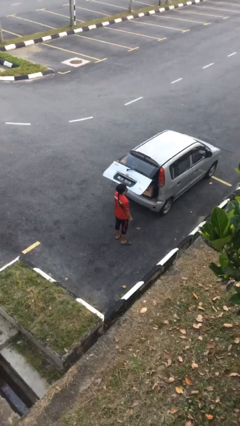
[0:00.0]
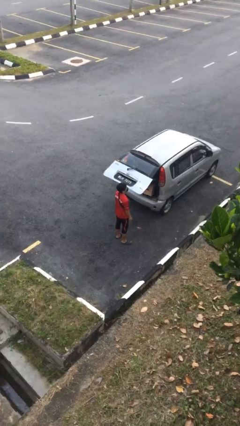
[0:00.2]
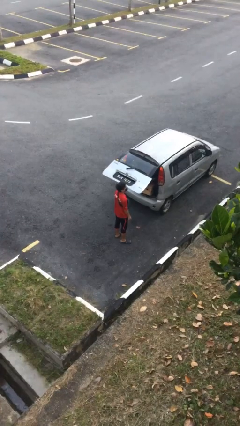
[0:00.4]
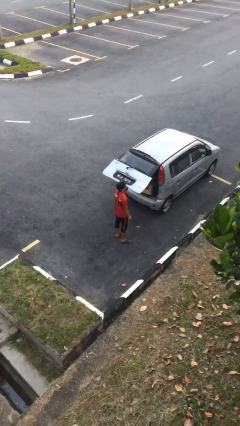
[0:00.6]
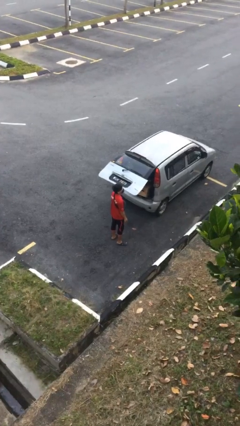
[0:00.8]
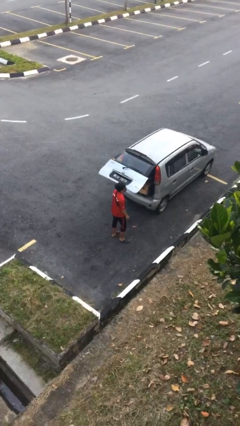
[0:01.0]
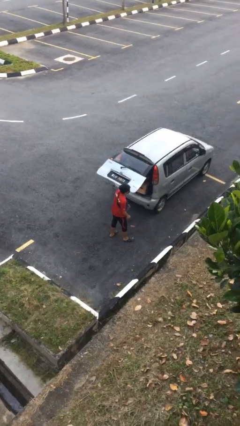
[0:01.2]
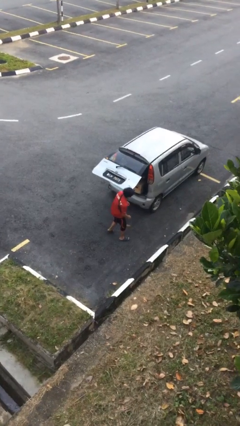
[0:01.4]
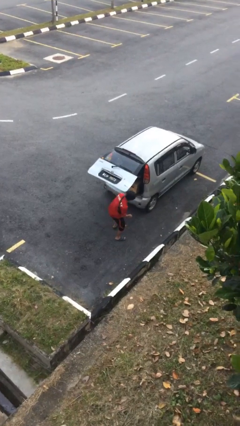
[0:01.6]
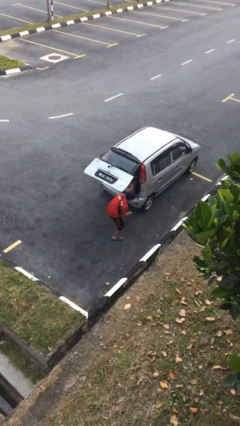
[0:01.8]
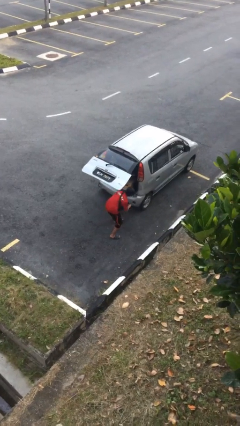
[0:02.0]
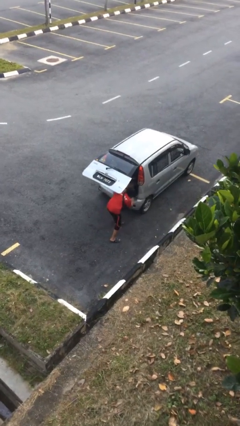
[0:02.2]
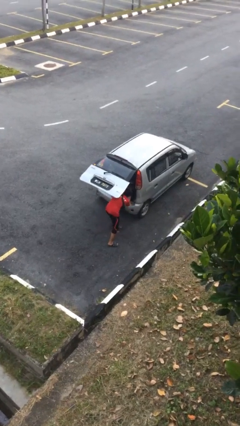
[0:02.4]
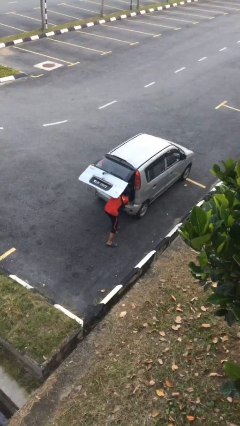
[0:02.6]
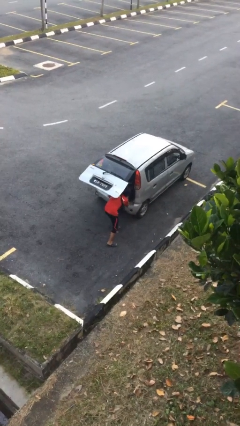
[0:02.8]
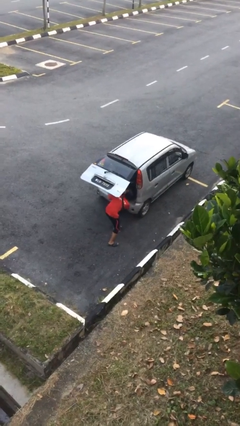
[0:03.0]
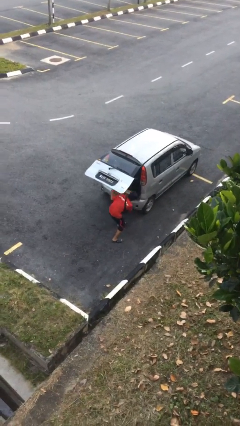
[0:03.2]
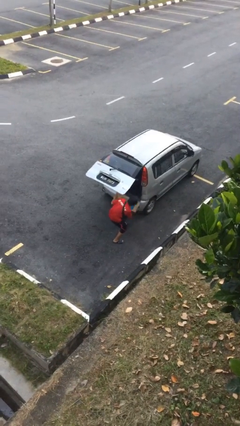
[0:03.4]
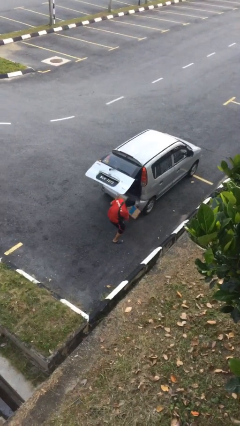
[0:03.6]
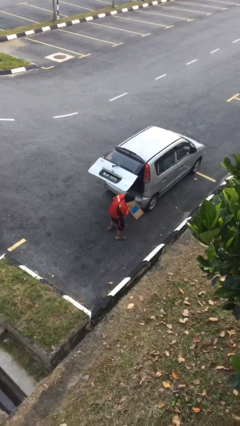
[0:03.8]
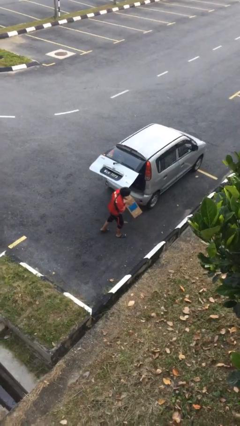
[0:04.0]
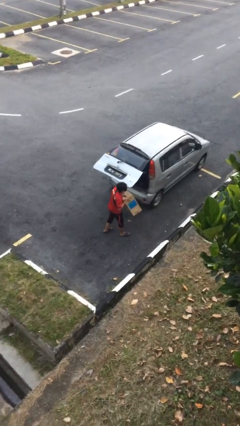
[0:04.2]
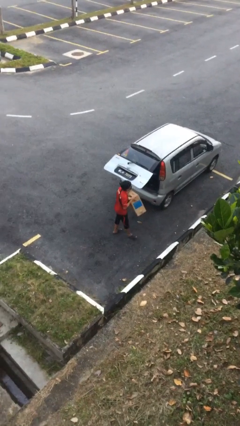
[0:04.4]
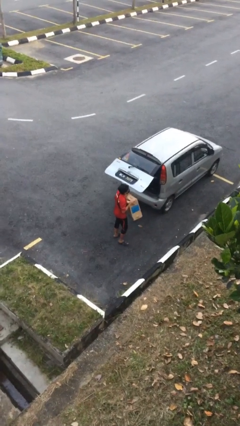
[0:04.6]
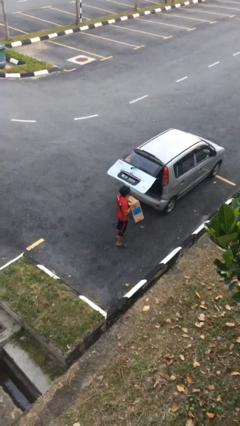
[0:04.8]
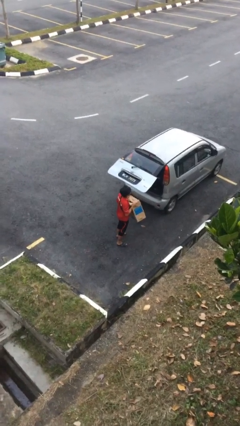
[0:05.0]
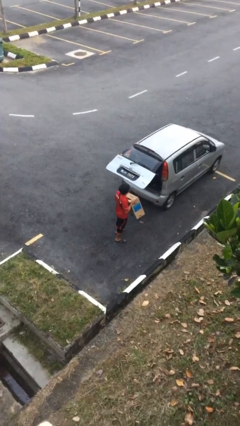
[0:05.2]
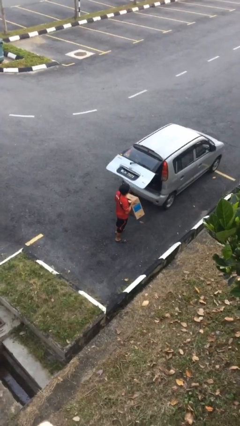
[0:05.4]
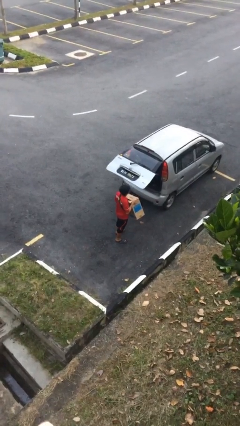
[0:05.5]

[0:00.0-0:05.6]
person unloads car

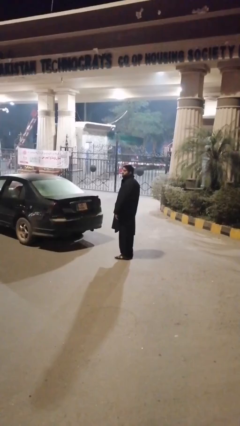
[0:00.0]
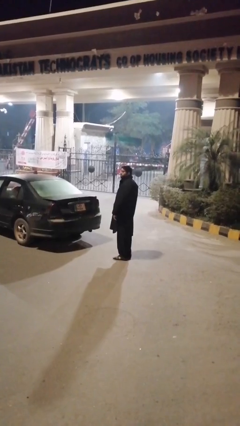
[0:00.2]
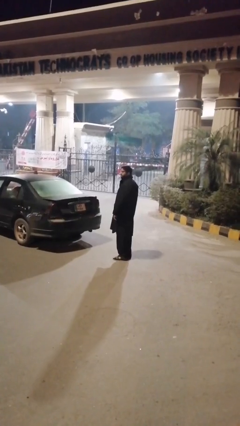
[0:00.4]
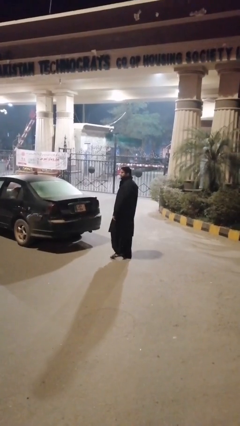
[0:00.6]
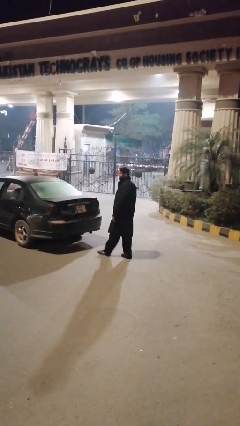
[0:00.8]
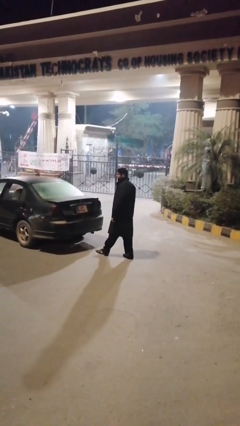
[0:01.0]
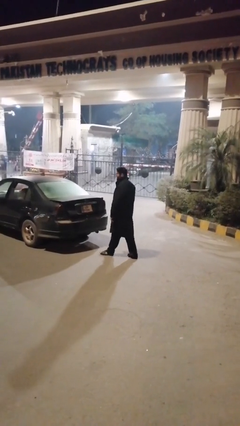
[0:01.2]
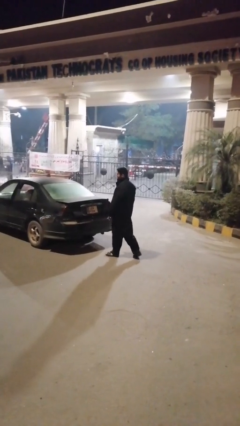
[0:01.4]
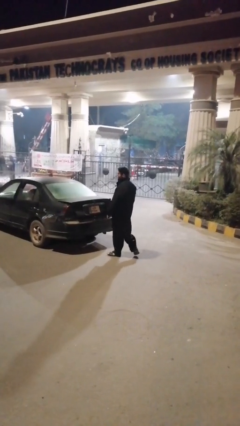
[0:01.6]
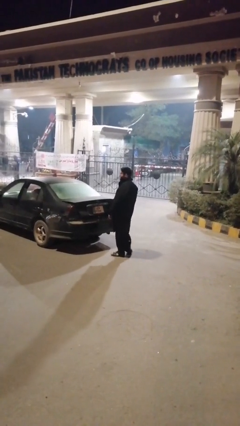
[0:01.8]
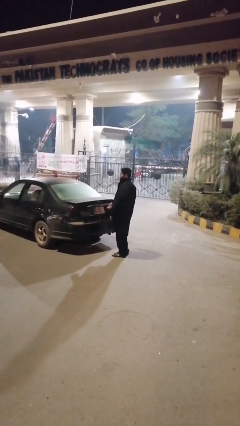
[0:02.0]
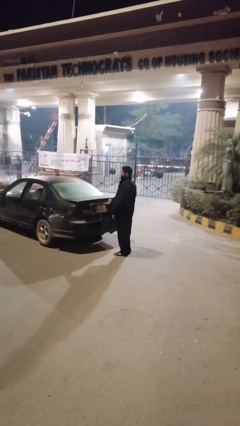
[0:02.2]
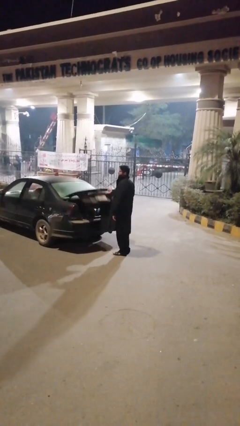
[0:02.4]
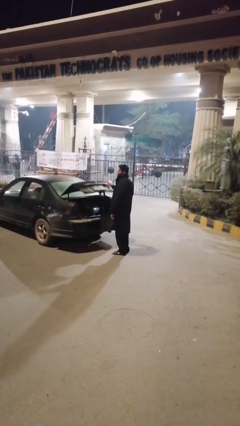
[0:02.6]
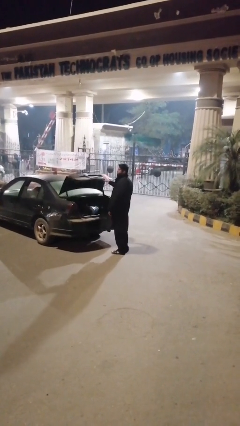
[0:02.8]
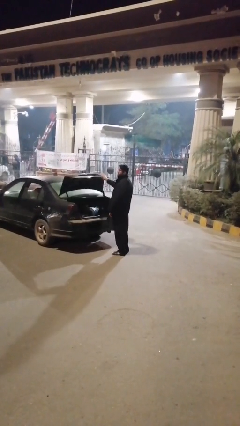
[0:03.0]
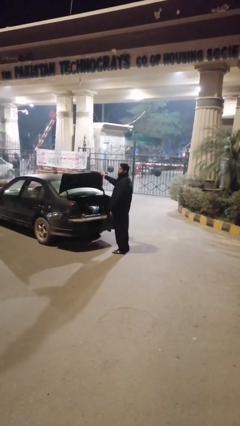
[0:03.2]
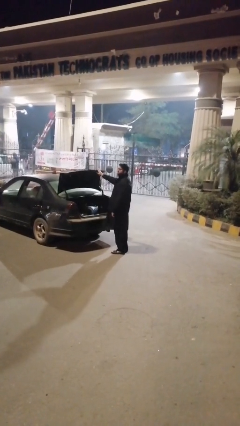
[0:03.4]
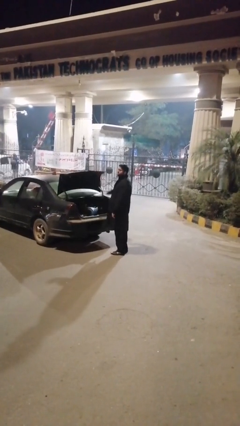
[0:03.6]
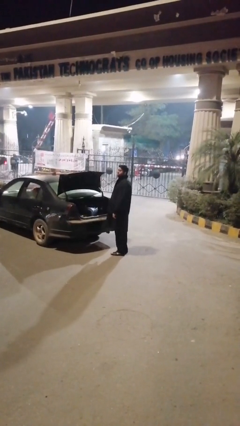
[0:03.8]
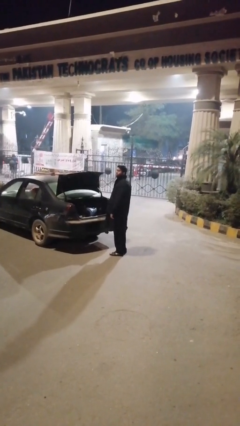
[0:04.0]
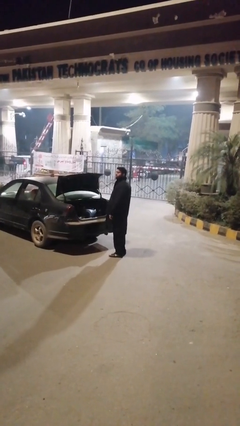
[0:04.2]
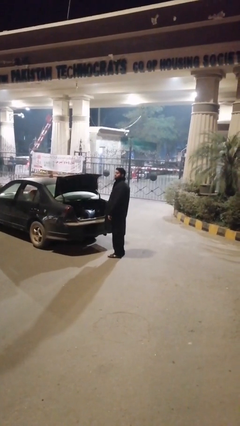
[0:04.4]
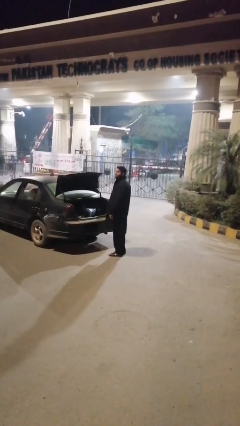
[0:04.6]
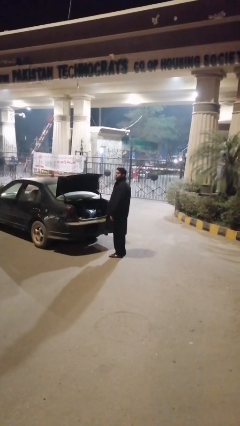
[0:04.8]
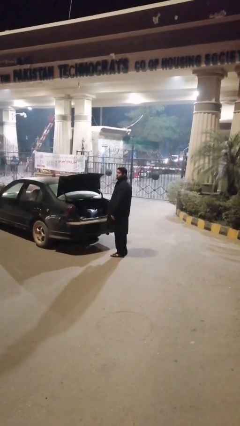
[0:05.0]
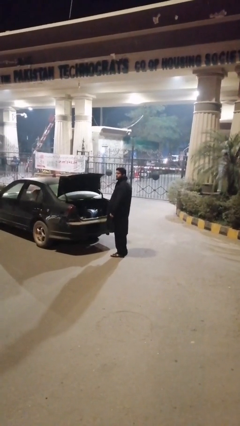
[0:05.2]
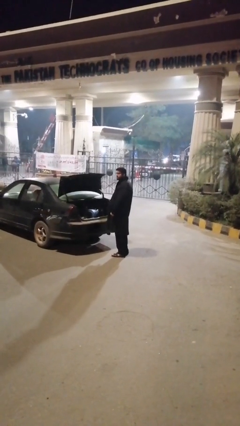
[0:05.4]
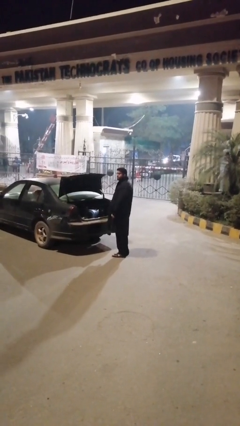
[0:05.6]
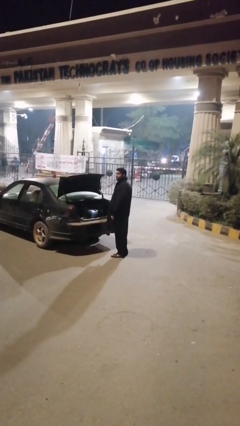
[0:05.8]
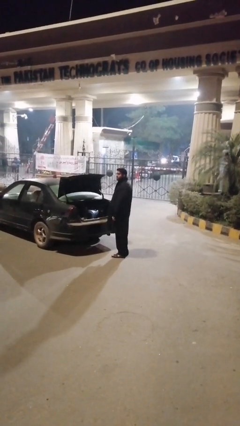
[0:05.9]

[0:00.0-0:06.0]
person opens car trunk

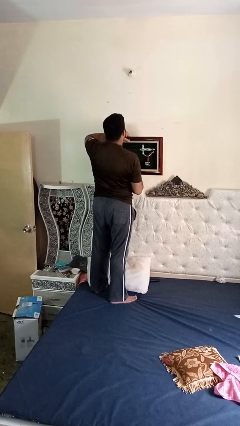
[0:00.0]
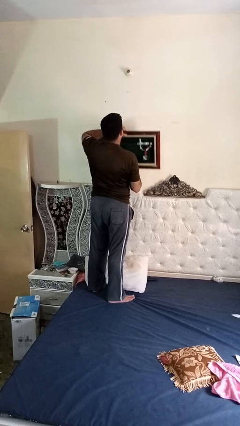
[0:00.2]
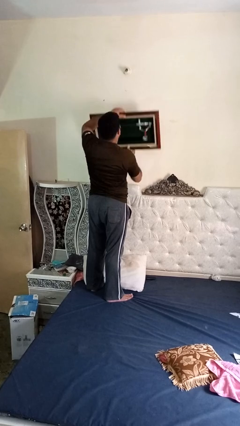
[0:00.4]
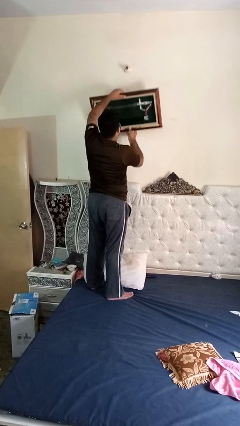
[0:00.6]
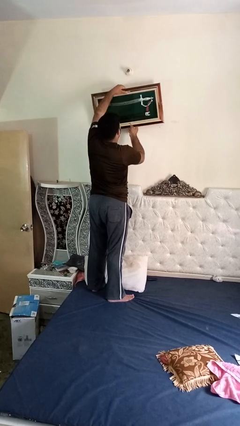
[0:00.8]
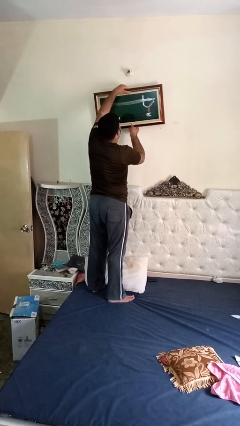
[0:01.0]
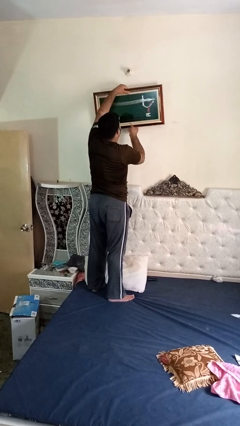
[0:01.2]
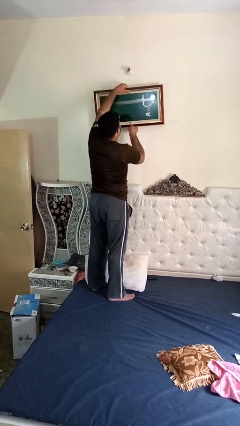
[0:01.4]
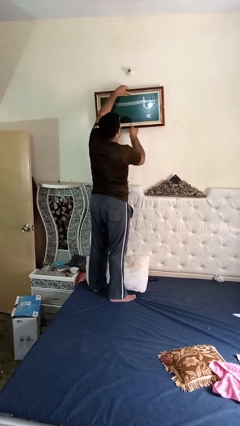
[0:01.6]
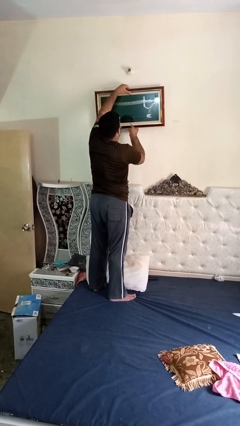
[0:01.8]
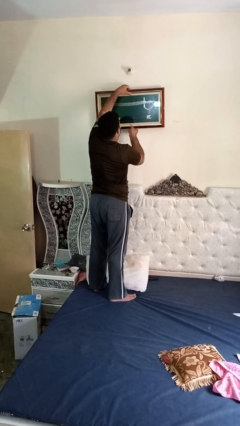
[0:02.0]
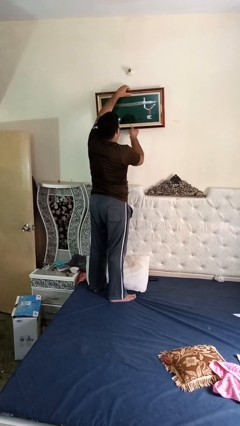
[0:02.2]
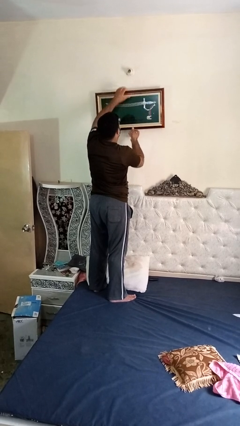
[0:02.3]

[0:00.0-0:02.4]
person puts up picture frame

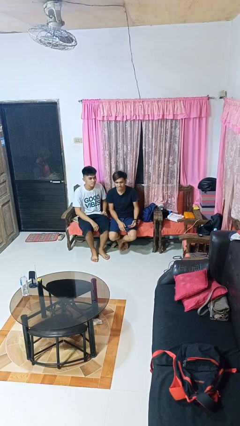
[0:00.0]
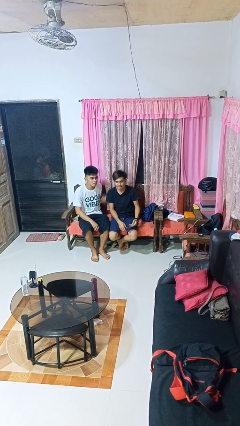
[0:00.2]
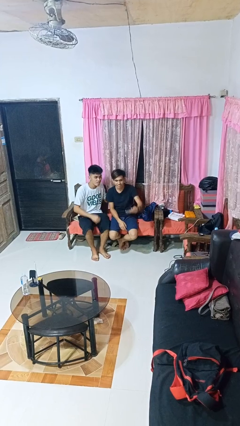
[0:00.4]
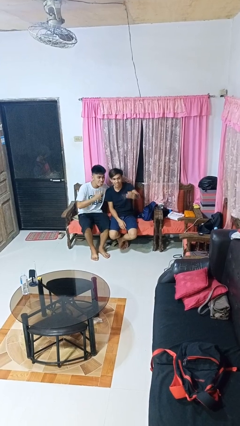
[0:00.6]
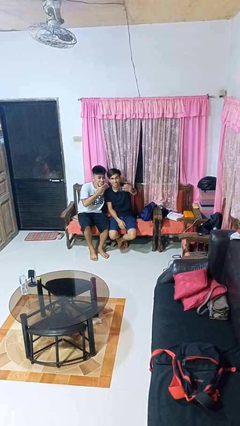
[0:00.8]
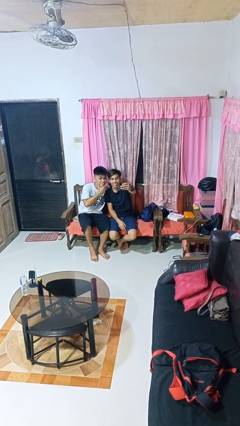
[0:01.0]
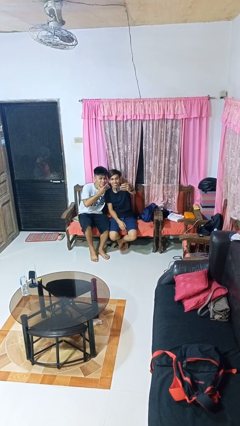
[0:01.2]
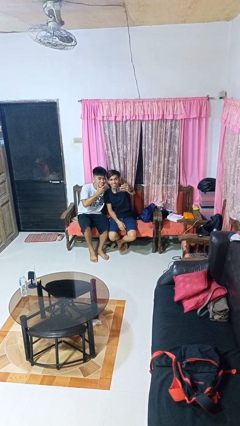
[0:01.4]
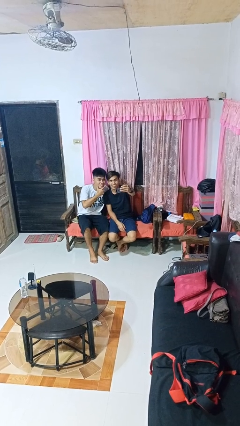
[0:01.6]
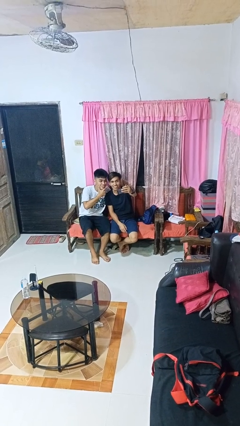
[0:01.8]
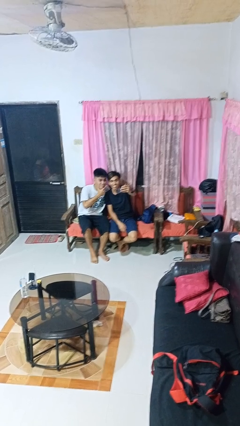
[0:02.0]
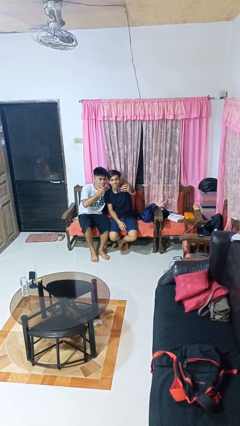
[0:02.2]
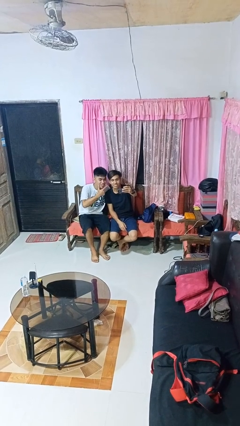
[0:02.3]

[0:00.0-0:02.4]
person takes selfie with person

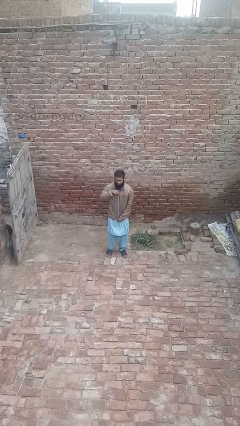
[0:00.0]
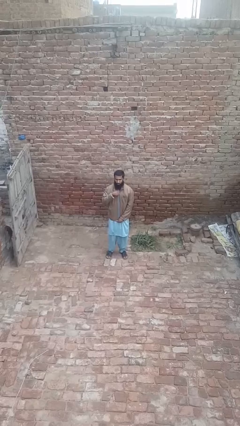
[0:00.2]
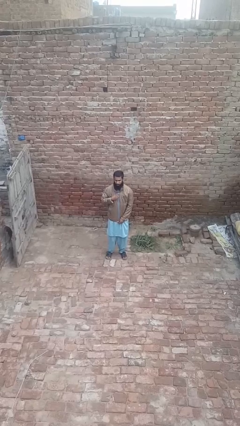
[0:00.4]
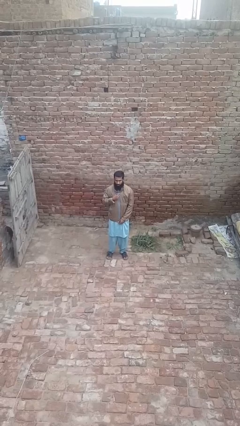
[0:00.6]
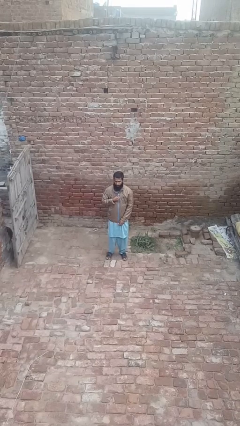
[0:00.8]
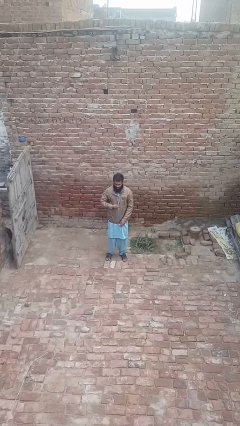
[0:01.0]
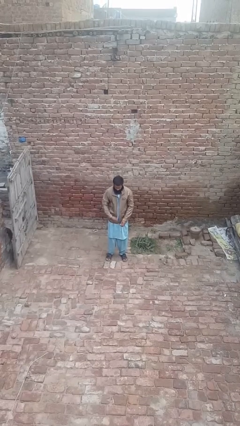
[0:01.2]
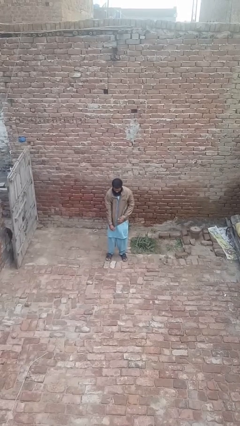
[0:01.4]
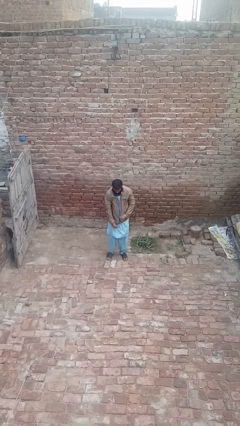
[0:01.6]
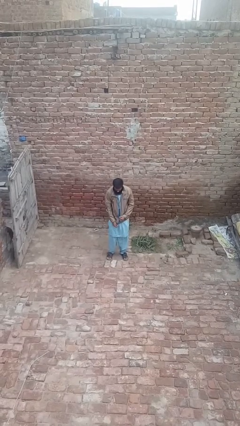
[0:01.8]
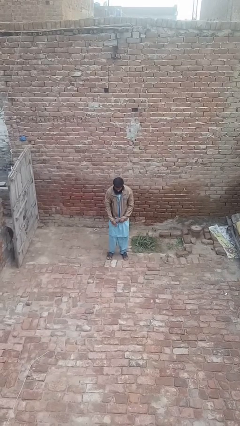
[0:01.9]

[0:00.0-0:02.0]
person unzips jacket
